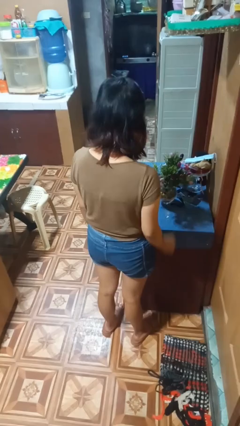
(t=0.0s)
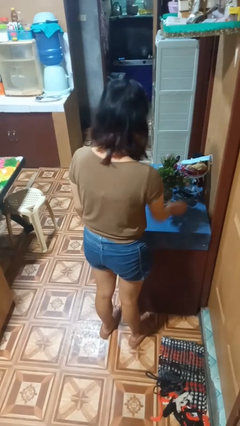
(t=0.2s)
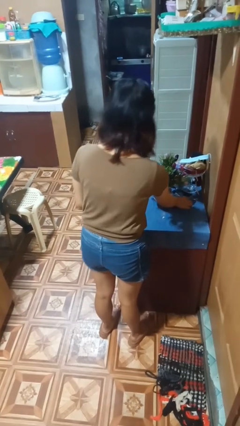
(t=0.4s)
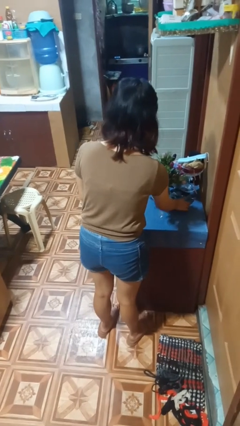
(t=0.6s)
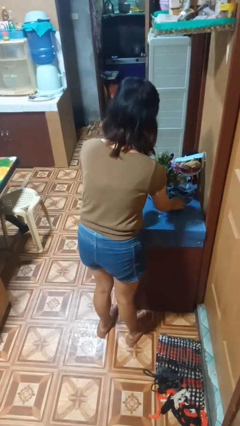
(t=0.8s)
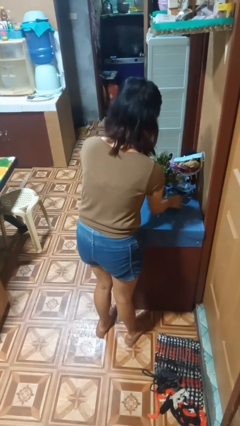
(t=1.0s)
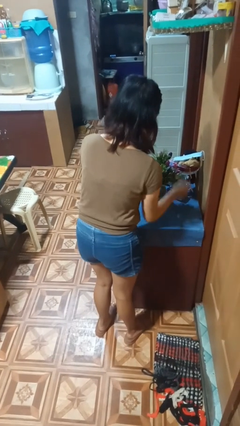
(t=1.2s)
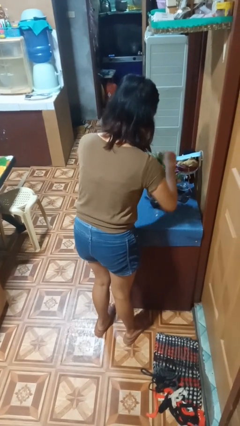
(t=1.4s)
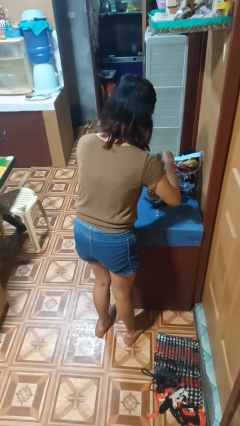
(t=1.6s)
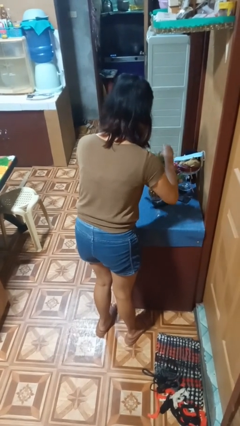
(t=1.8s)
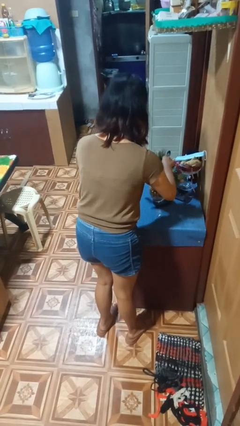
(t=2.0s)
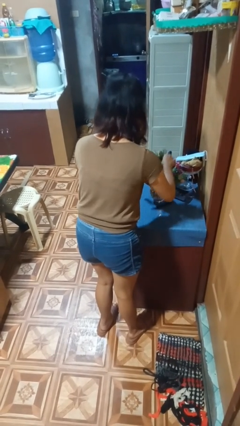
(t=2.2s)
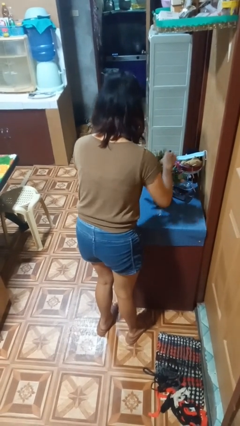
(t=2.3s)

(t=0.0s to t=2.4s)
person arranges flowers in vase

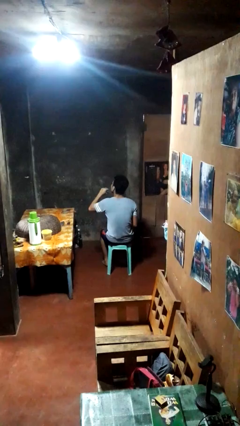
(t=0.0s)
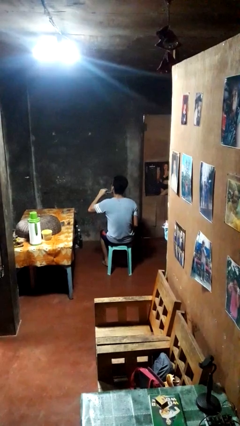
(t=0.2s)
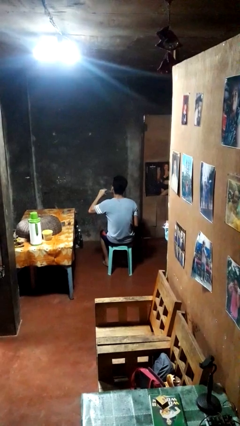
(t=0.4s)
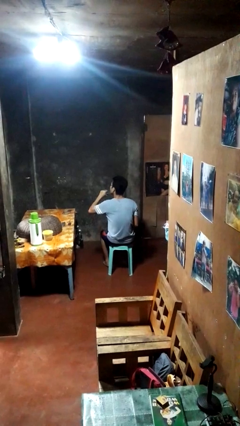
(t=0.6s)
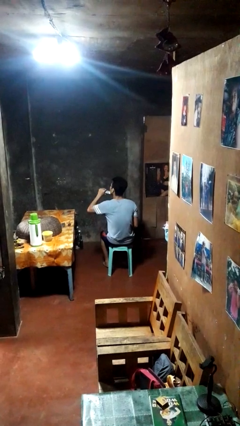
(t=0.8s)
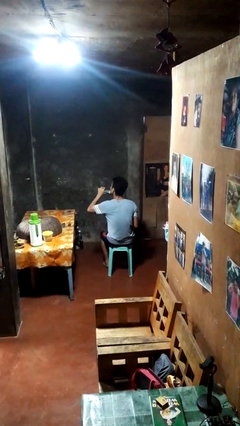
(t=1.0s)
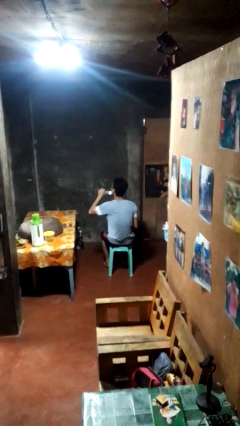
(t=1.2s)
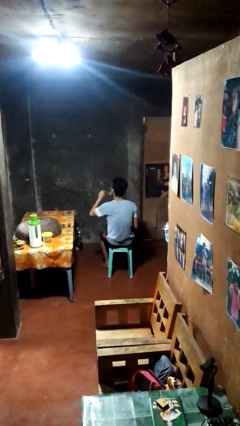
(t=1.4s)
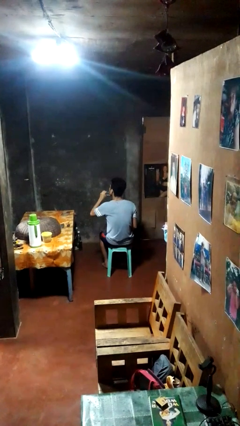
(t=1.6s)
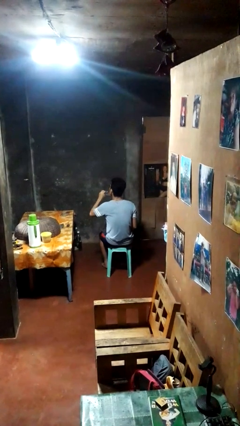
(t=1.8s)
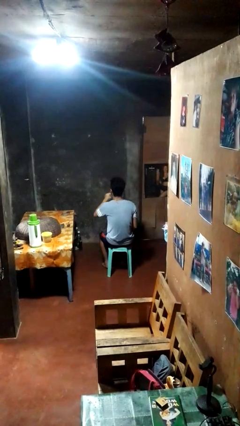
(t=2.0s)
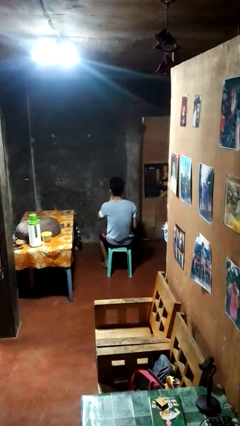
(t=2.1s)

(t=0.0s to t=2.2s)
person shaves face

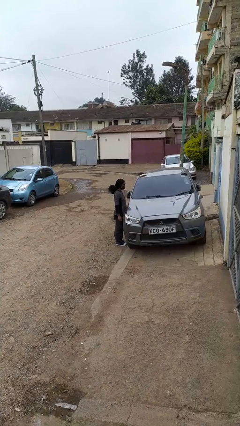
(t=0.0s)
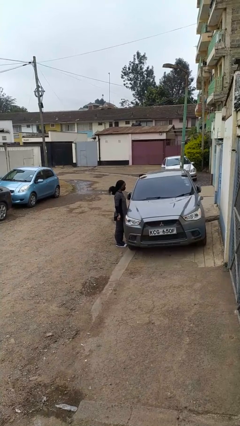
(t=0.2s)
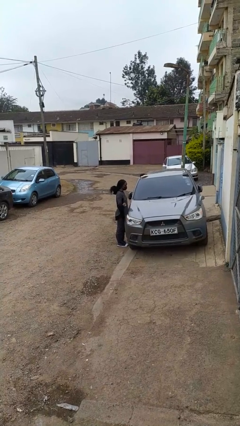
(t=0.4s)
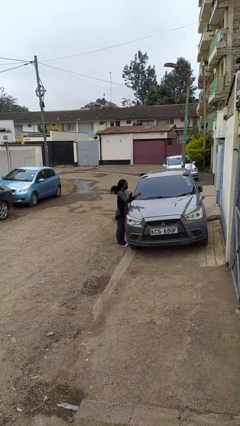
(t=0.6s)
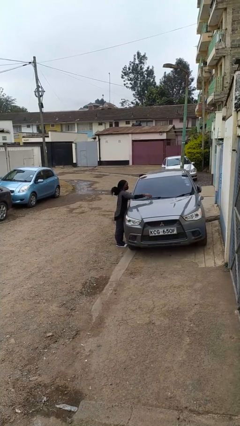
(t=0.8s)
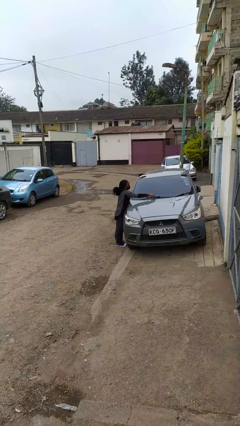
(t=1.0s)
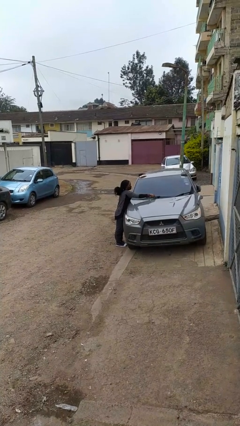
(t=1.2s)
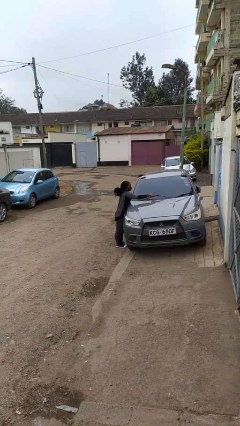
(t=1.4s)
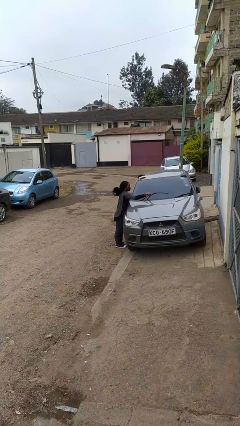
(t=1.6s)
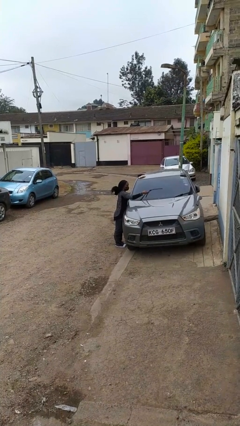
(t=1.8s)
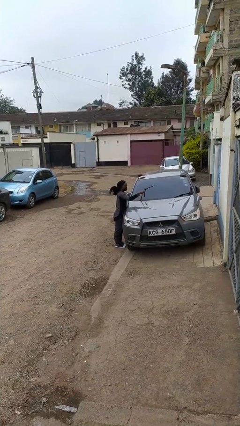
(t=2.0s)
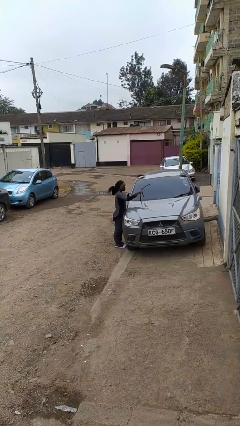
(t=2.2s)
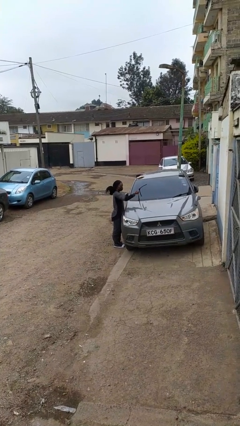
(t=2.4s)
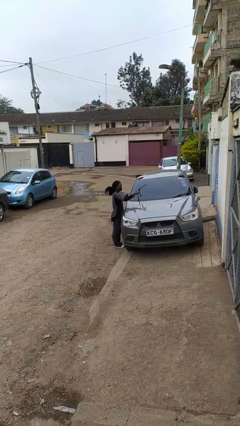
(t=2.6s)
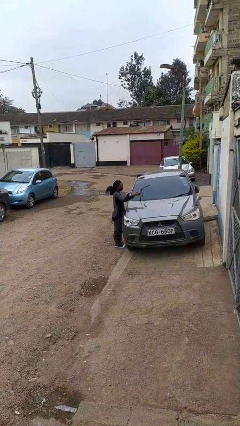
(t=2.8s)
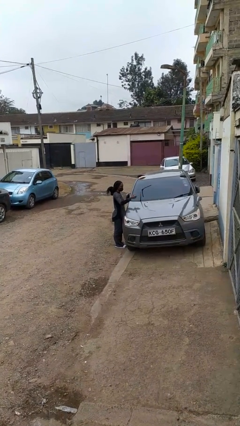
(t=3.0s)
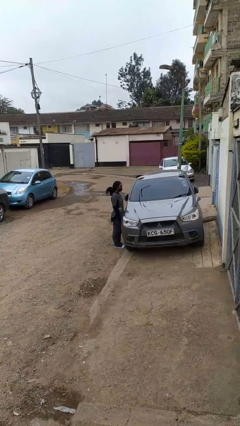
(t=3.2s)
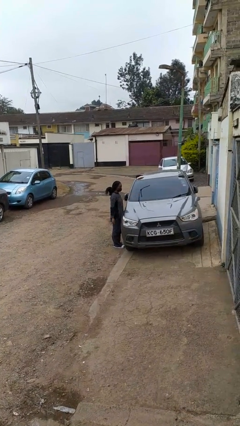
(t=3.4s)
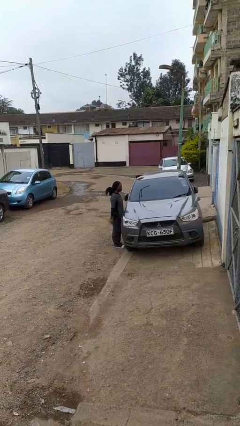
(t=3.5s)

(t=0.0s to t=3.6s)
person picks up object from couch

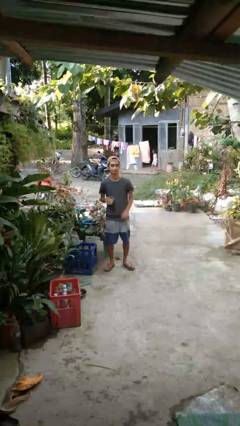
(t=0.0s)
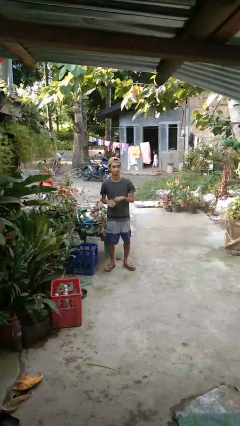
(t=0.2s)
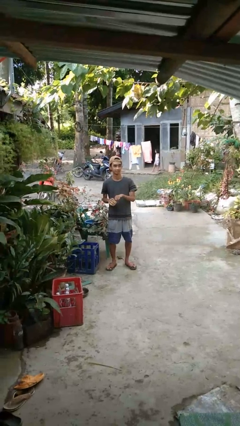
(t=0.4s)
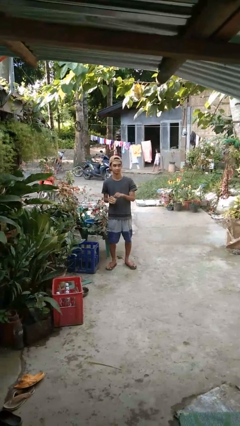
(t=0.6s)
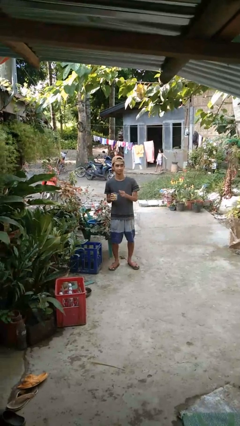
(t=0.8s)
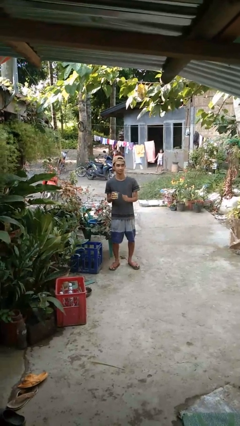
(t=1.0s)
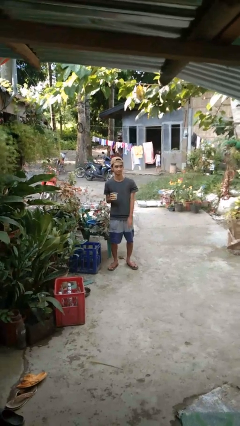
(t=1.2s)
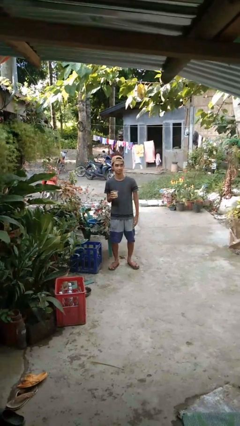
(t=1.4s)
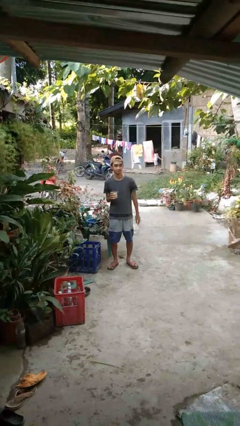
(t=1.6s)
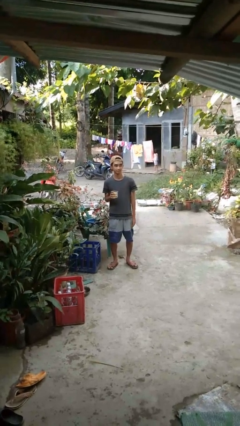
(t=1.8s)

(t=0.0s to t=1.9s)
person opens beverage can

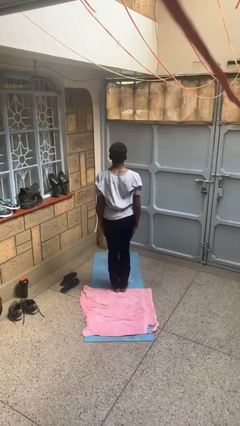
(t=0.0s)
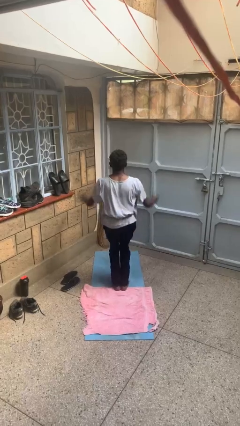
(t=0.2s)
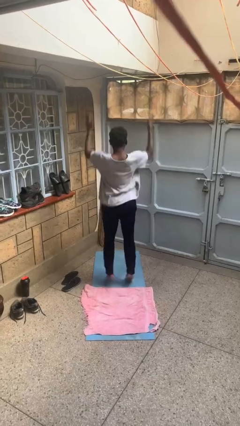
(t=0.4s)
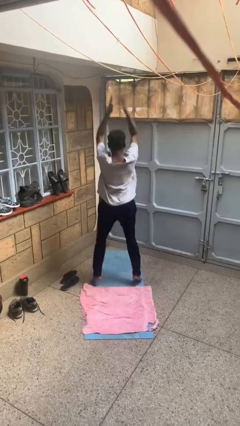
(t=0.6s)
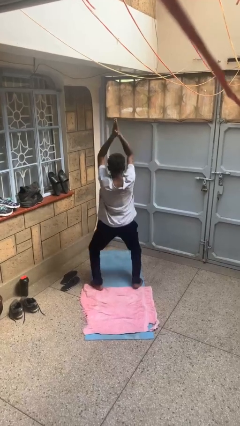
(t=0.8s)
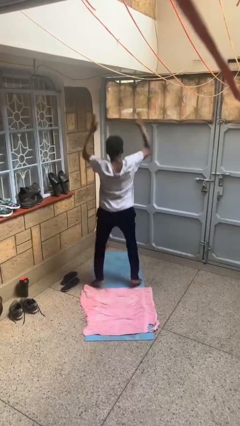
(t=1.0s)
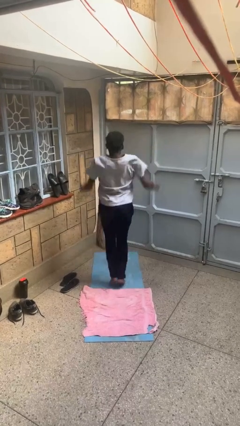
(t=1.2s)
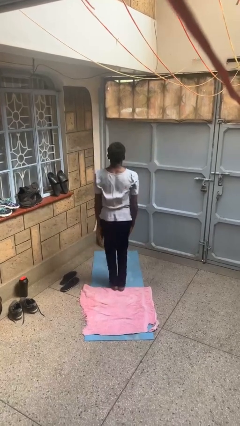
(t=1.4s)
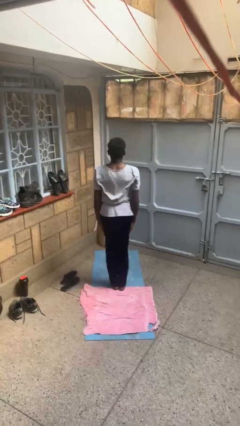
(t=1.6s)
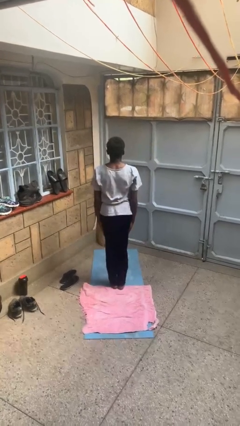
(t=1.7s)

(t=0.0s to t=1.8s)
person exercises with jumping jacks

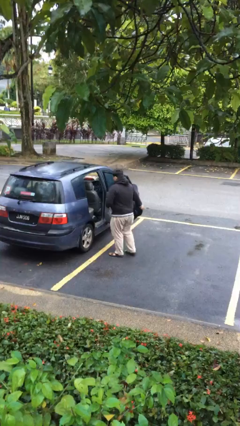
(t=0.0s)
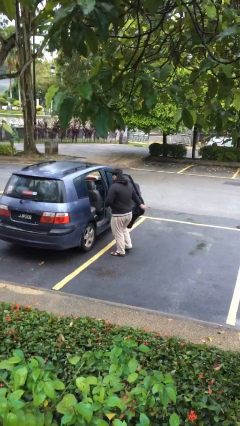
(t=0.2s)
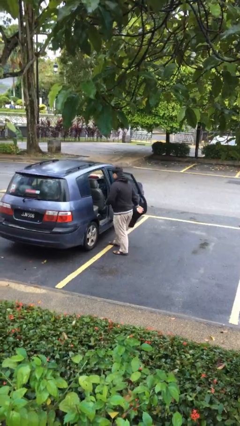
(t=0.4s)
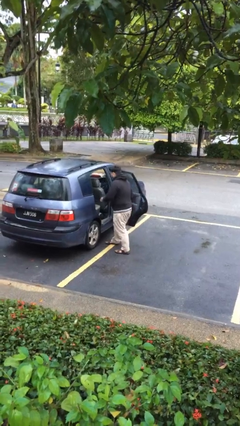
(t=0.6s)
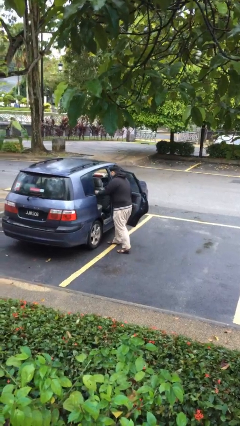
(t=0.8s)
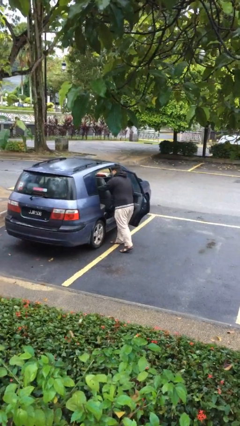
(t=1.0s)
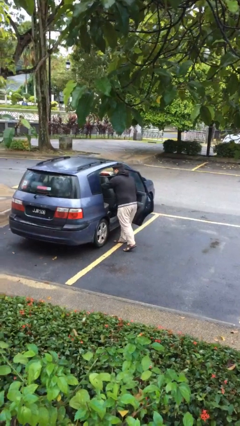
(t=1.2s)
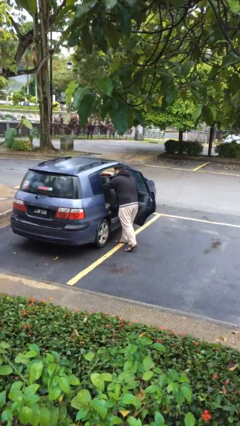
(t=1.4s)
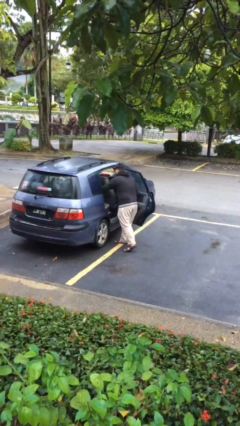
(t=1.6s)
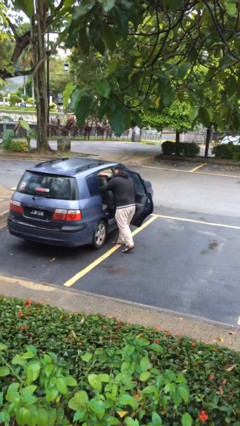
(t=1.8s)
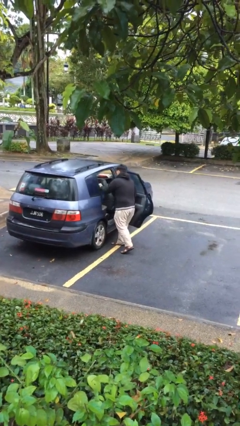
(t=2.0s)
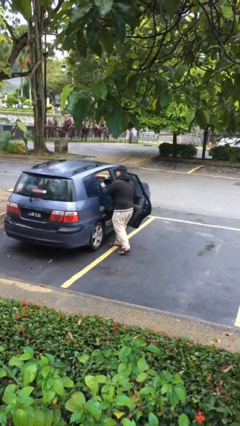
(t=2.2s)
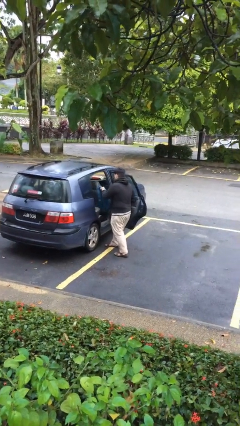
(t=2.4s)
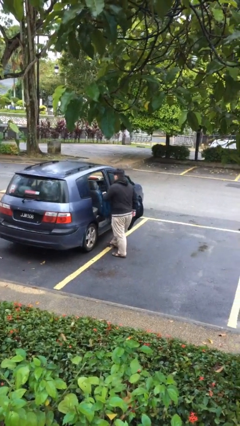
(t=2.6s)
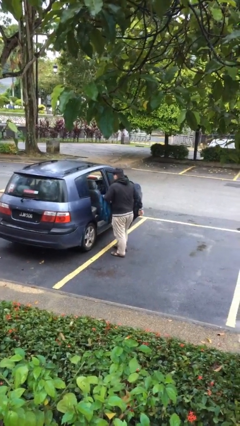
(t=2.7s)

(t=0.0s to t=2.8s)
person unloads car

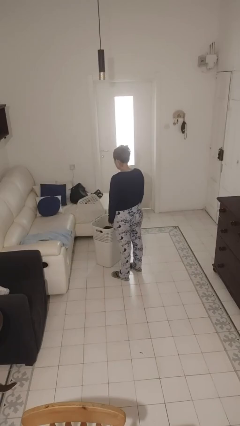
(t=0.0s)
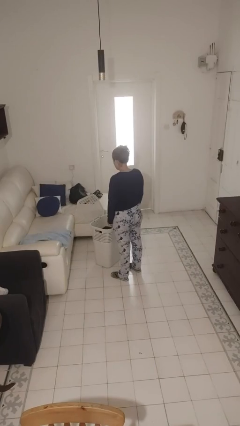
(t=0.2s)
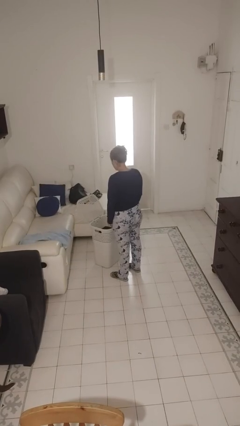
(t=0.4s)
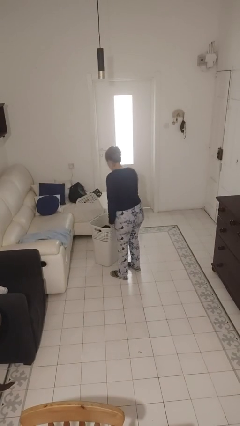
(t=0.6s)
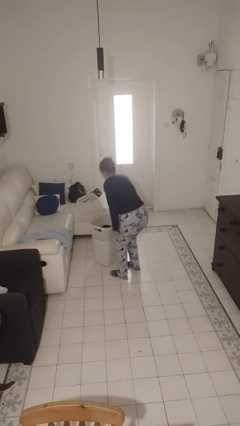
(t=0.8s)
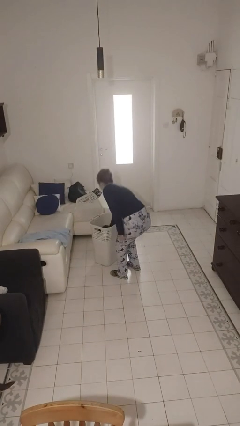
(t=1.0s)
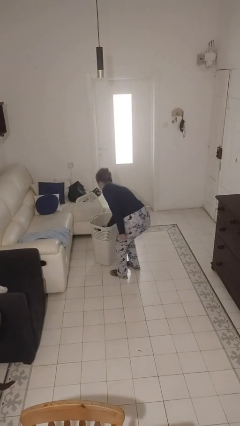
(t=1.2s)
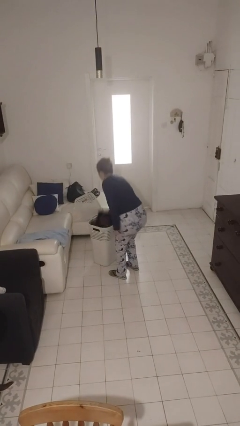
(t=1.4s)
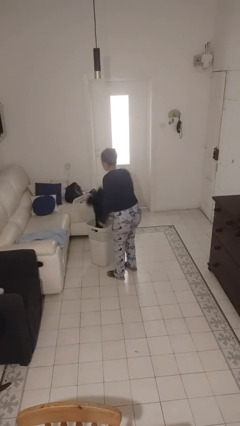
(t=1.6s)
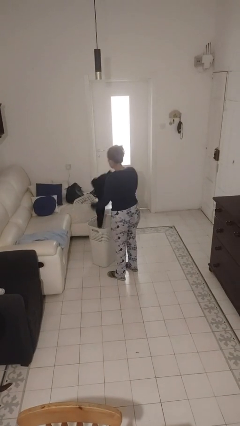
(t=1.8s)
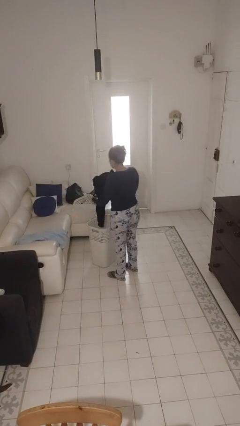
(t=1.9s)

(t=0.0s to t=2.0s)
person takes object from basket
